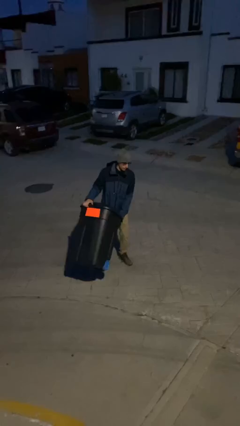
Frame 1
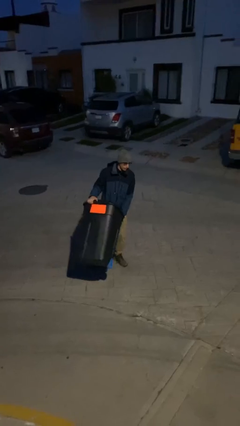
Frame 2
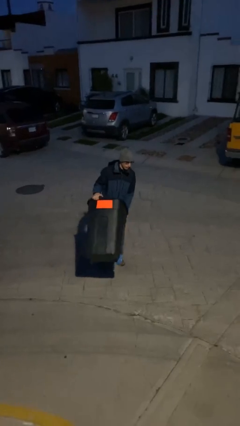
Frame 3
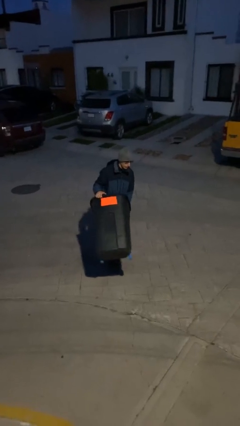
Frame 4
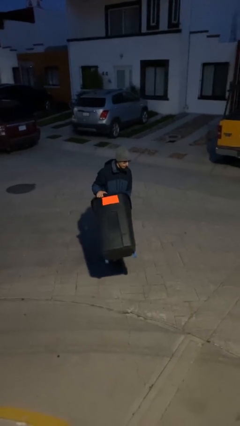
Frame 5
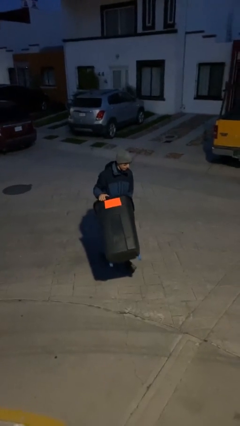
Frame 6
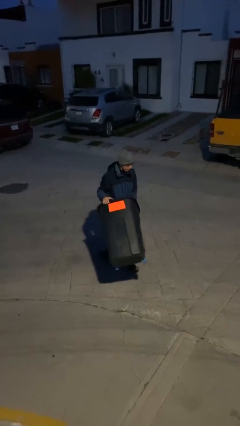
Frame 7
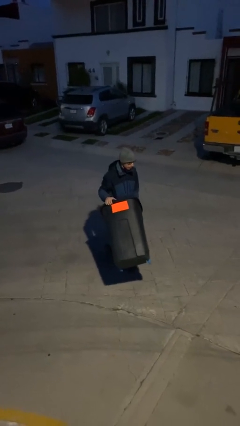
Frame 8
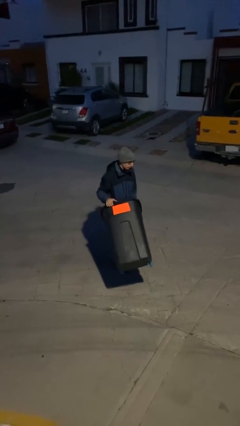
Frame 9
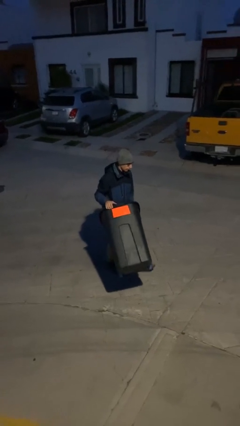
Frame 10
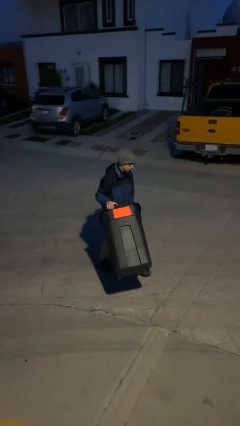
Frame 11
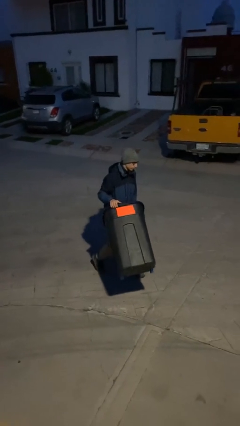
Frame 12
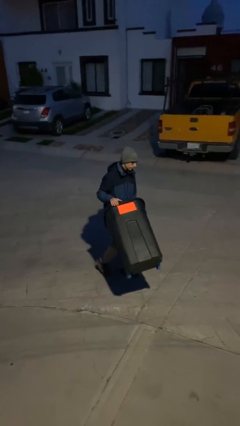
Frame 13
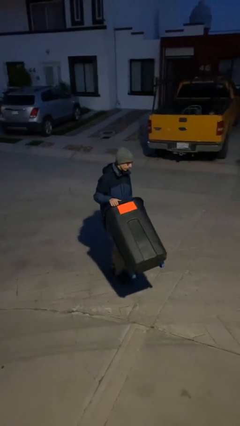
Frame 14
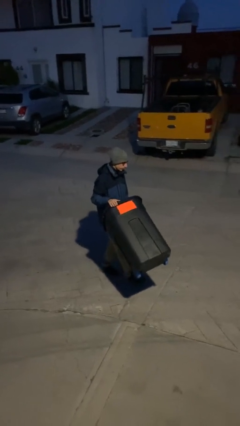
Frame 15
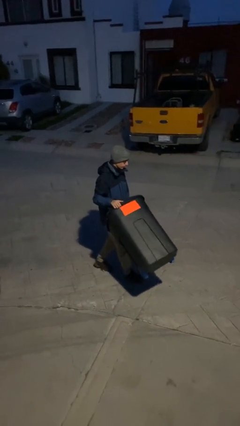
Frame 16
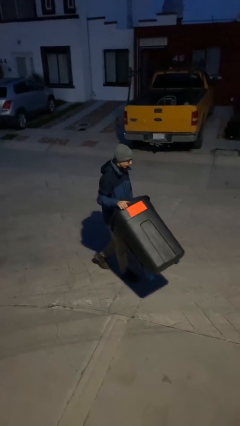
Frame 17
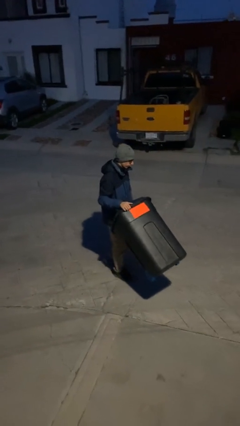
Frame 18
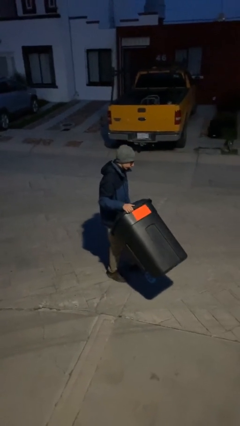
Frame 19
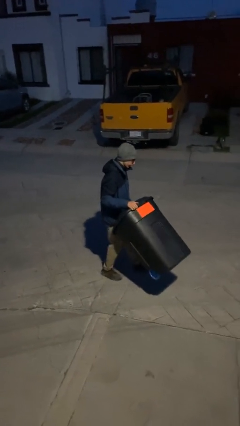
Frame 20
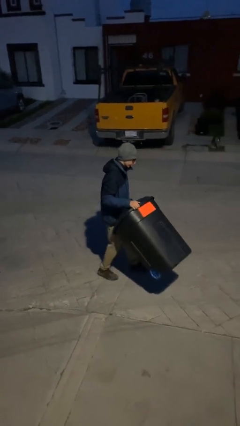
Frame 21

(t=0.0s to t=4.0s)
person carries heavy object

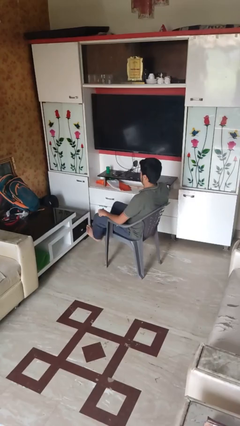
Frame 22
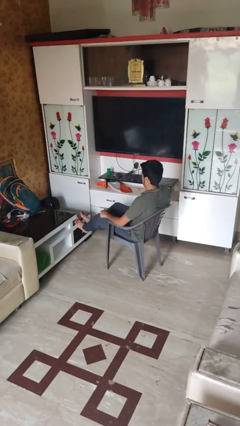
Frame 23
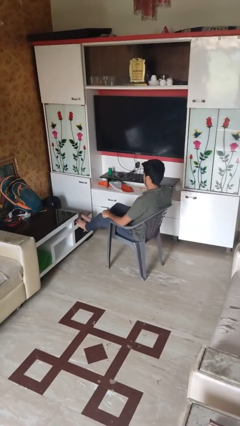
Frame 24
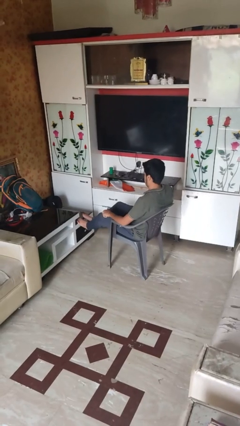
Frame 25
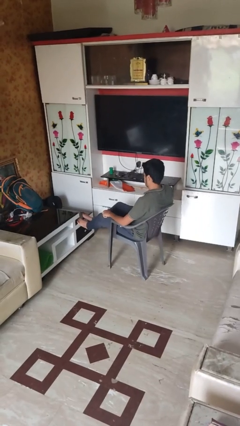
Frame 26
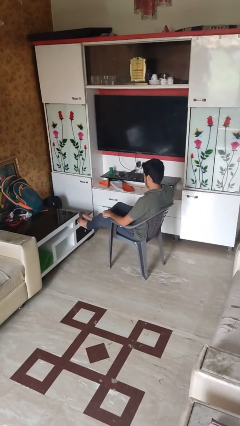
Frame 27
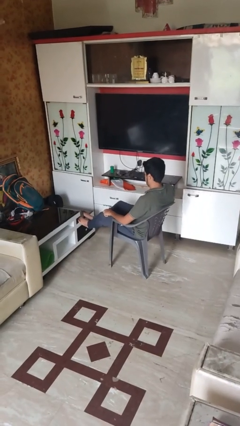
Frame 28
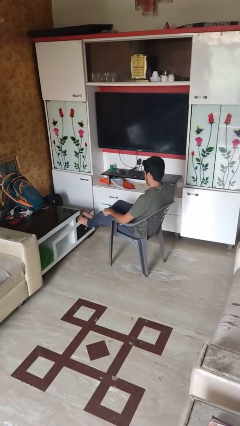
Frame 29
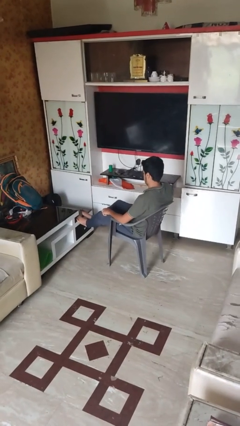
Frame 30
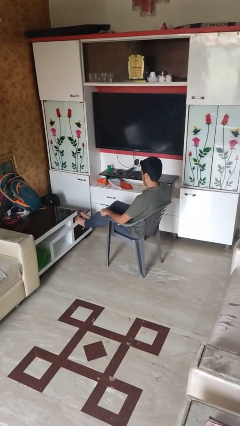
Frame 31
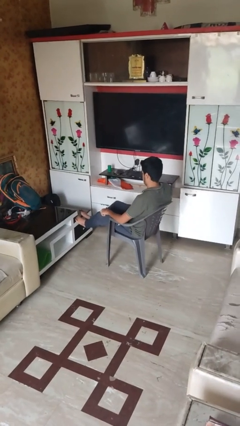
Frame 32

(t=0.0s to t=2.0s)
person puts feet up

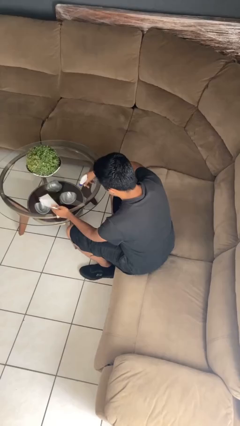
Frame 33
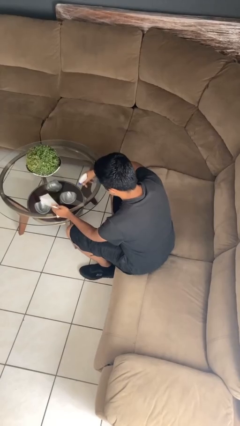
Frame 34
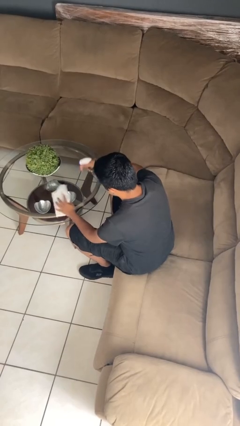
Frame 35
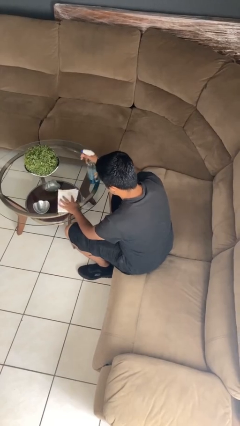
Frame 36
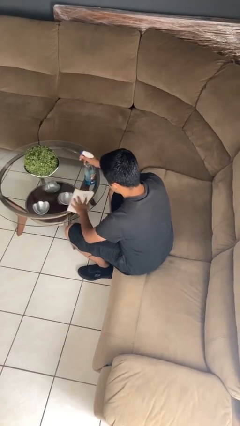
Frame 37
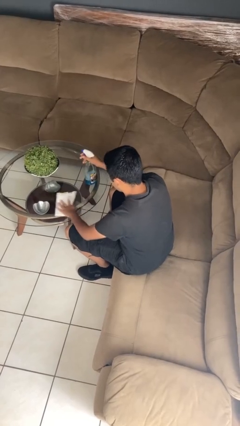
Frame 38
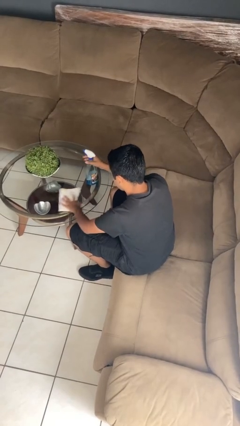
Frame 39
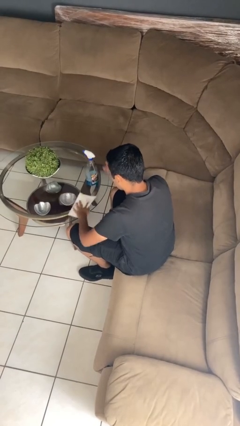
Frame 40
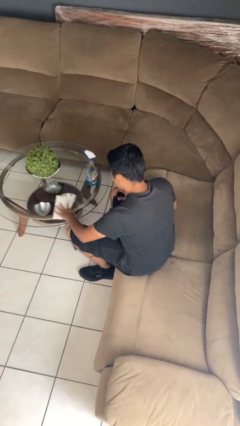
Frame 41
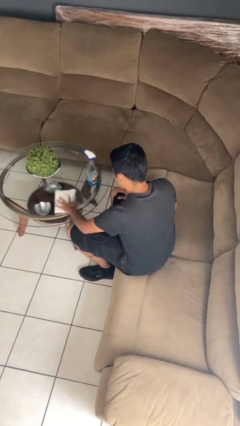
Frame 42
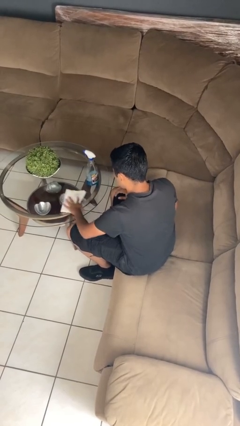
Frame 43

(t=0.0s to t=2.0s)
person cleans table with rag

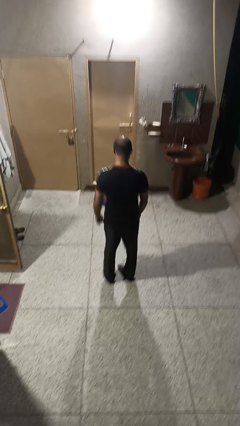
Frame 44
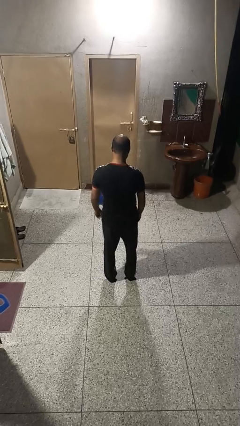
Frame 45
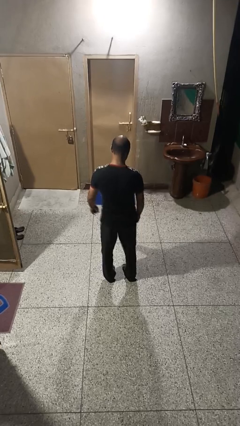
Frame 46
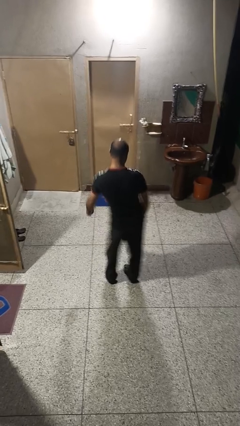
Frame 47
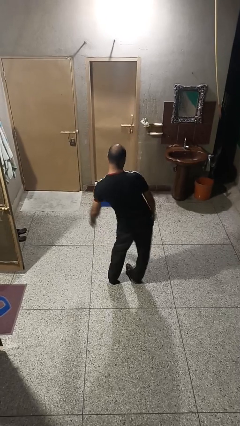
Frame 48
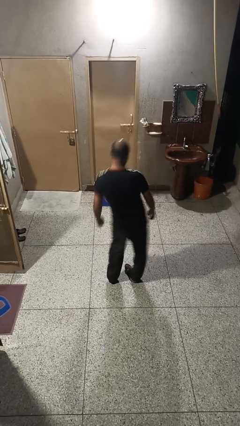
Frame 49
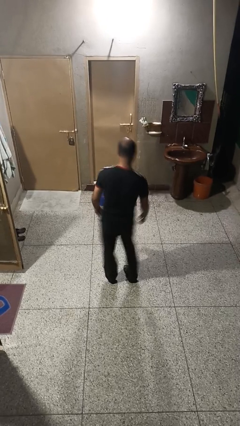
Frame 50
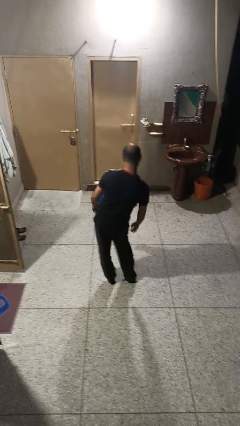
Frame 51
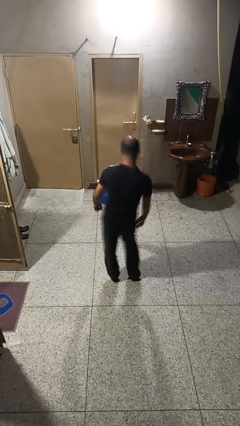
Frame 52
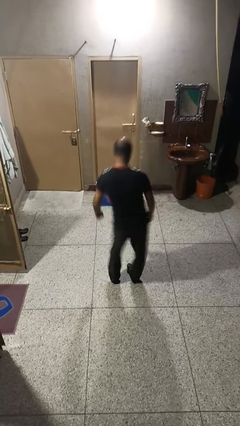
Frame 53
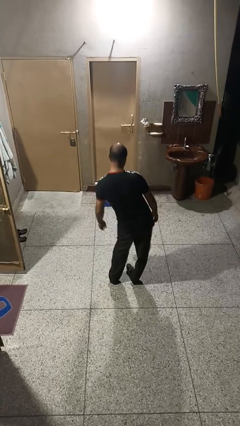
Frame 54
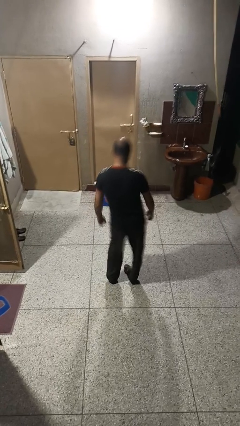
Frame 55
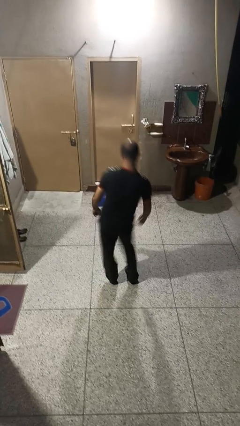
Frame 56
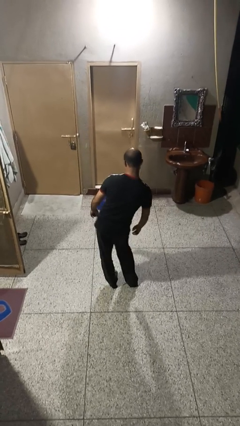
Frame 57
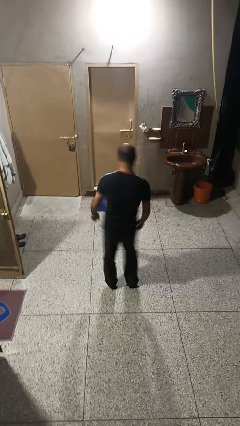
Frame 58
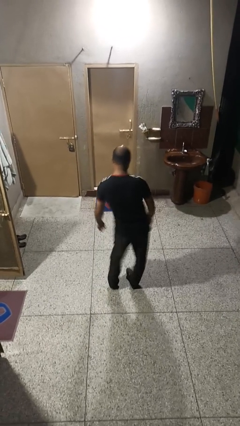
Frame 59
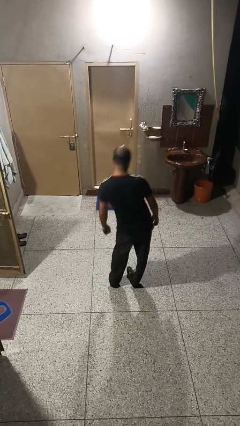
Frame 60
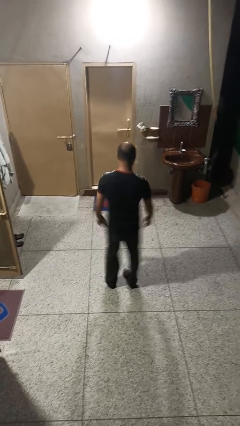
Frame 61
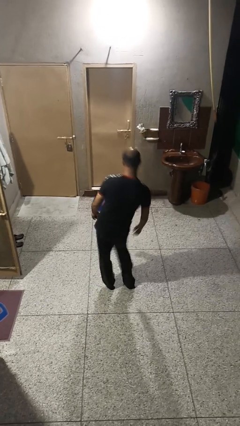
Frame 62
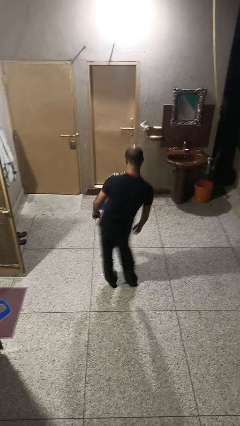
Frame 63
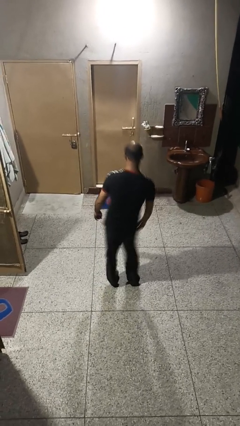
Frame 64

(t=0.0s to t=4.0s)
person wiggles hips

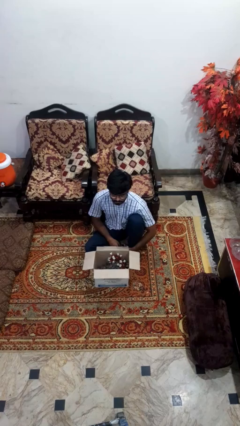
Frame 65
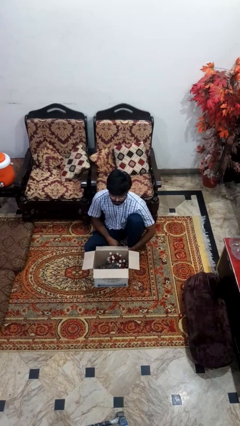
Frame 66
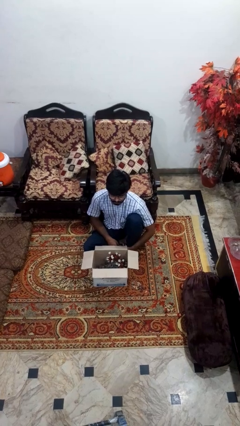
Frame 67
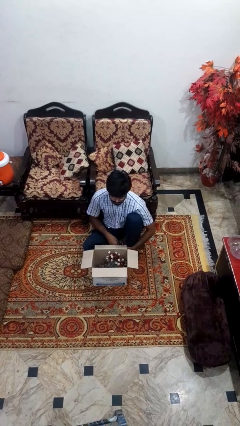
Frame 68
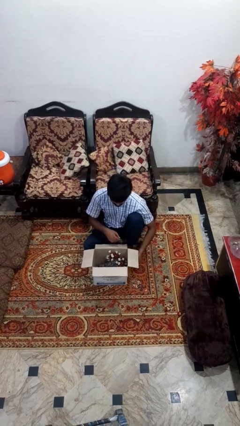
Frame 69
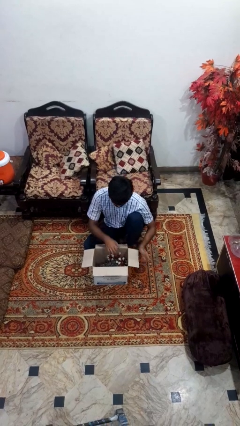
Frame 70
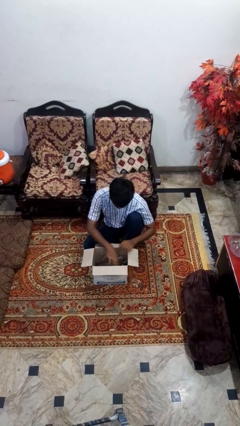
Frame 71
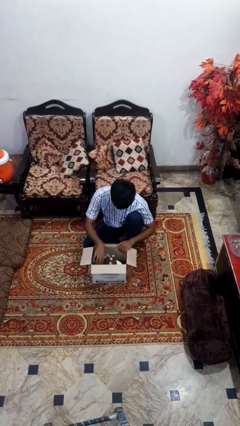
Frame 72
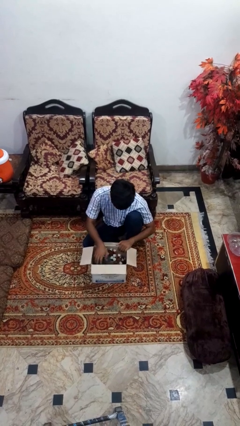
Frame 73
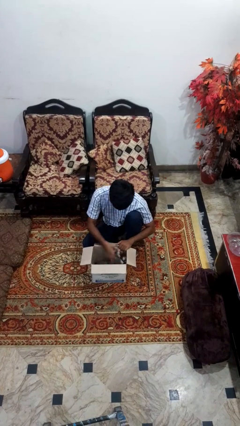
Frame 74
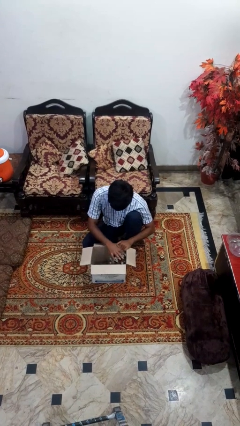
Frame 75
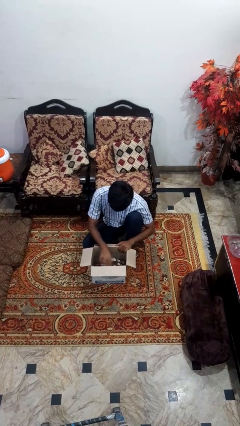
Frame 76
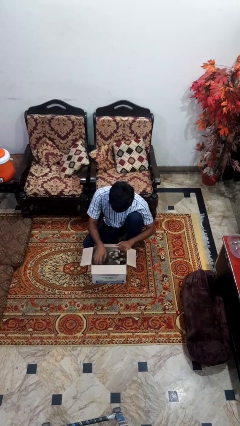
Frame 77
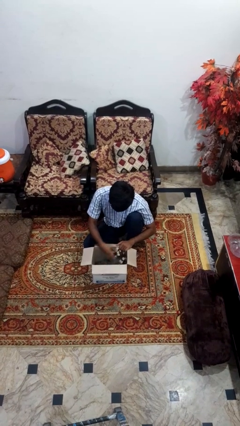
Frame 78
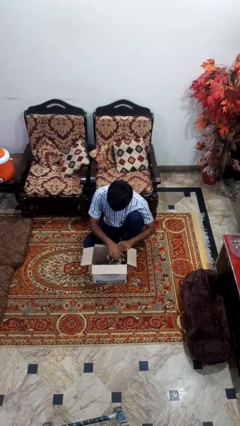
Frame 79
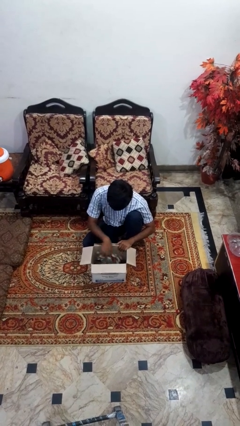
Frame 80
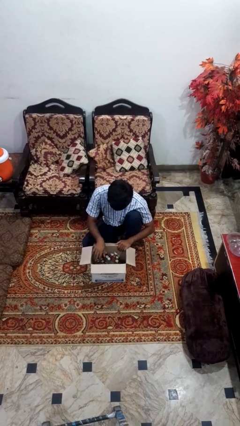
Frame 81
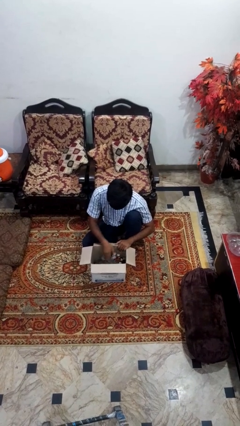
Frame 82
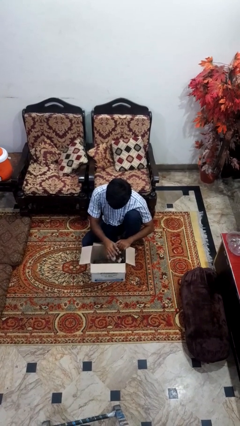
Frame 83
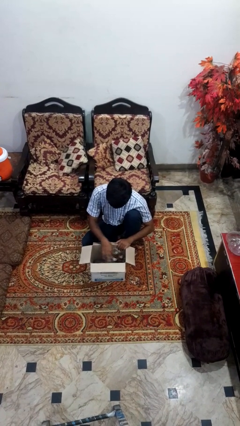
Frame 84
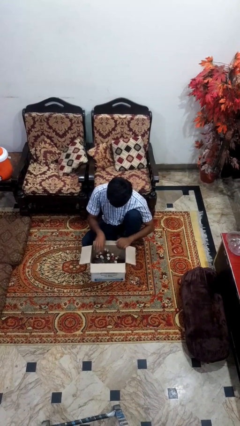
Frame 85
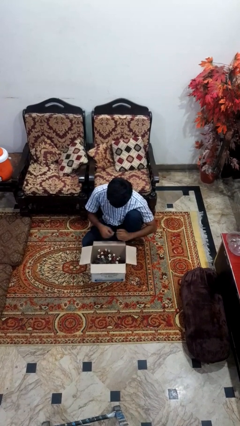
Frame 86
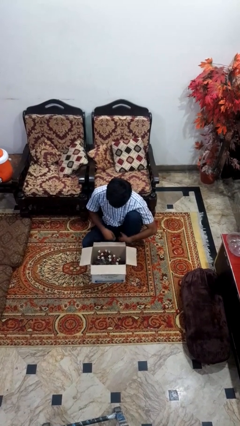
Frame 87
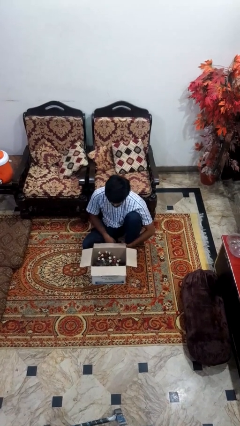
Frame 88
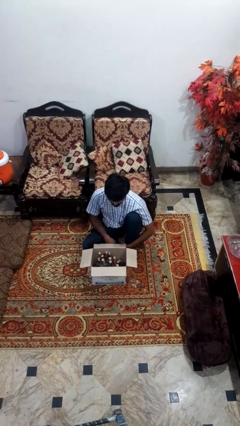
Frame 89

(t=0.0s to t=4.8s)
person searches in box

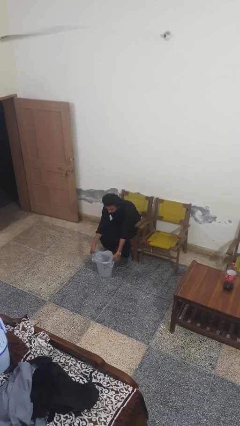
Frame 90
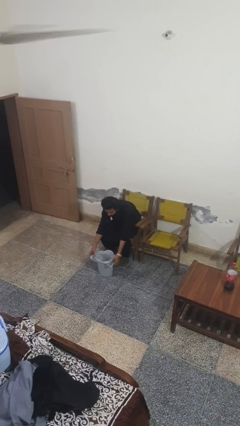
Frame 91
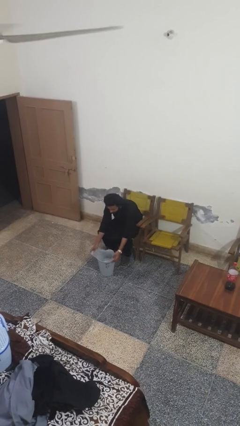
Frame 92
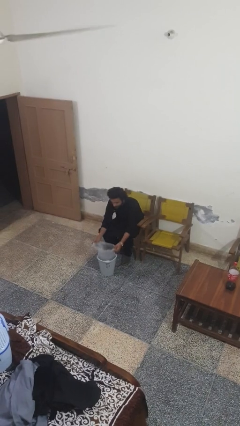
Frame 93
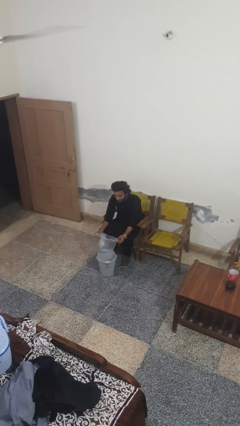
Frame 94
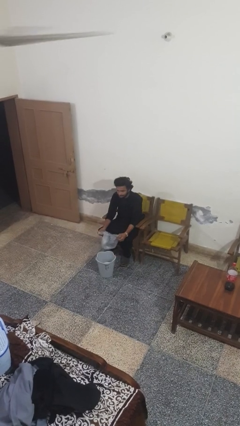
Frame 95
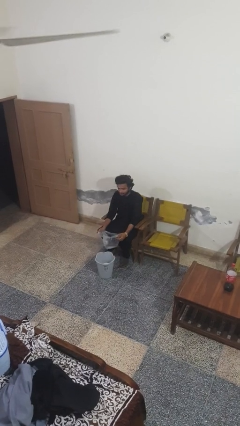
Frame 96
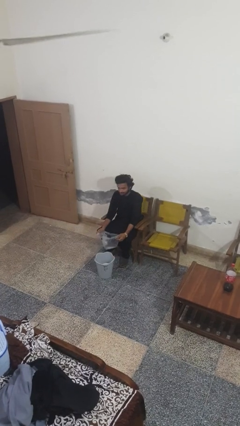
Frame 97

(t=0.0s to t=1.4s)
person removes trashbag from trashcan
